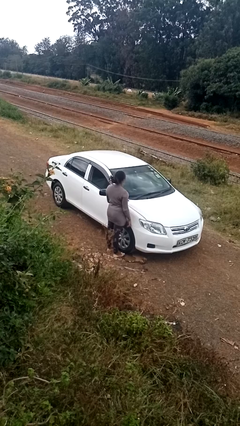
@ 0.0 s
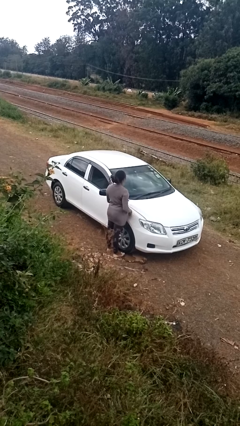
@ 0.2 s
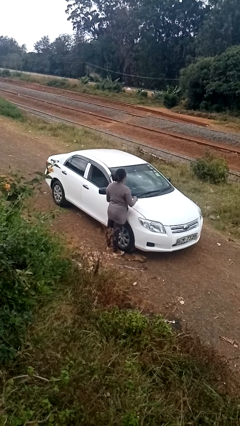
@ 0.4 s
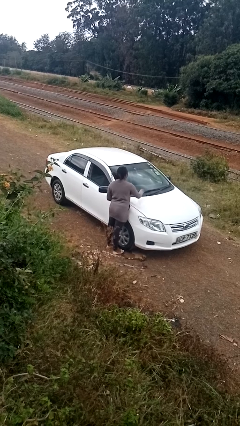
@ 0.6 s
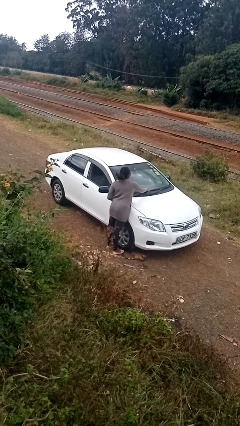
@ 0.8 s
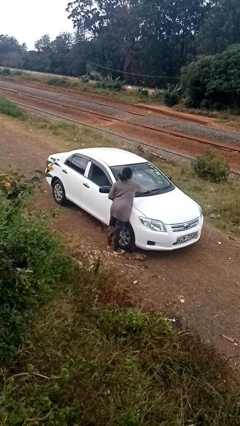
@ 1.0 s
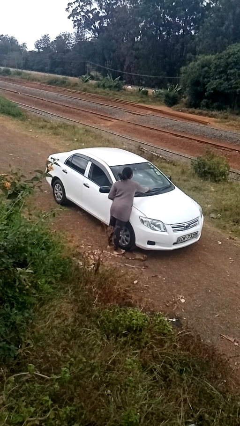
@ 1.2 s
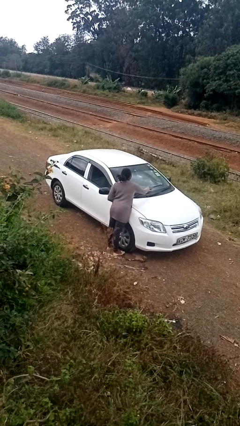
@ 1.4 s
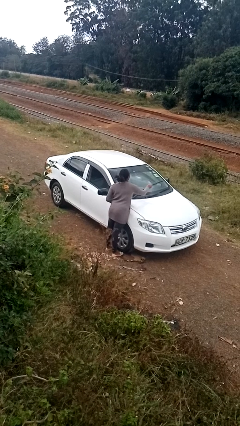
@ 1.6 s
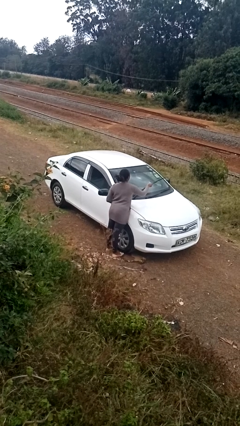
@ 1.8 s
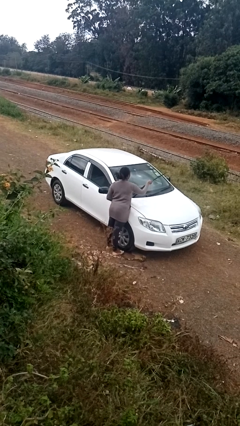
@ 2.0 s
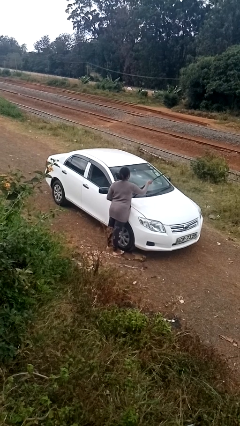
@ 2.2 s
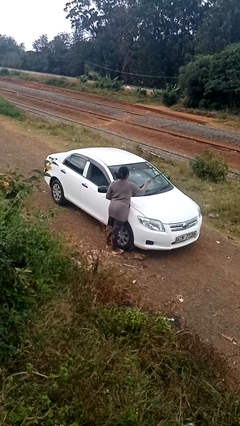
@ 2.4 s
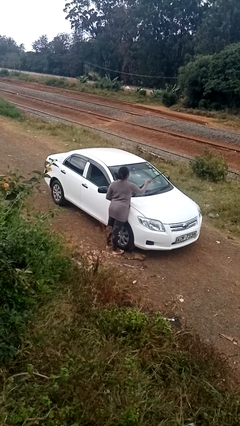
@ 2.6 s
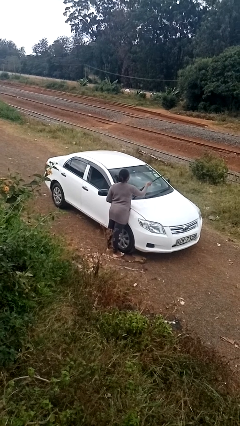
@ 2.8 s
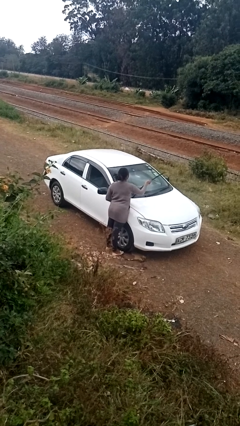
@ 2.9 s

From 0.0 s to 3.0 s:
person flips up car wipers

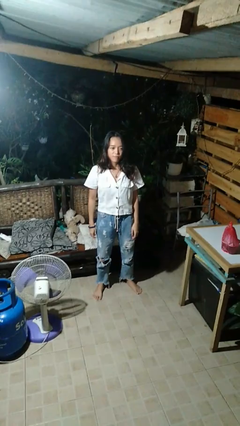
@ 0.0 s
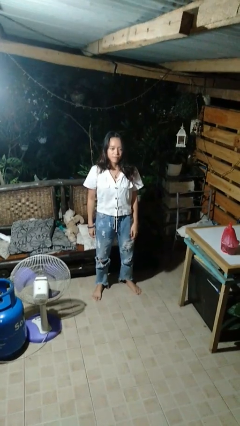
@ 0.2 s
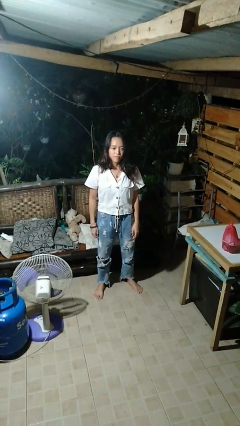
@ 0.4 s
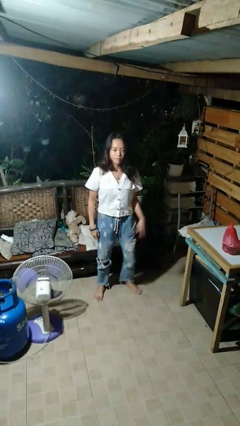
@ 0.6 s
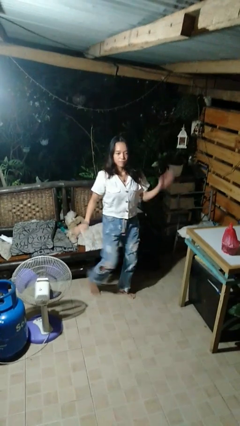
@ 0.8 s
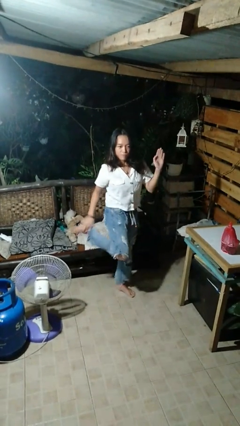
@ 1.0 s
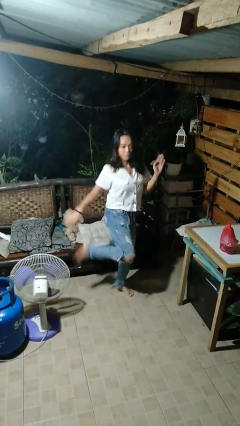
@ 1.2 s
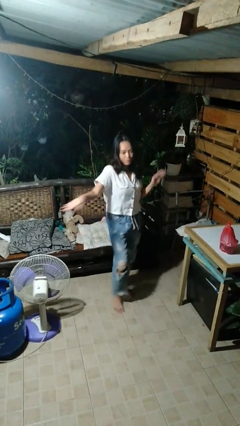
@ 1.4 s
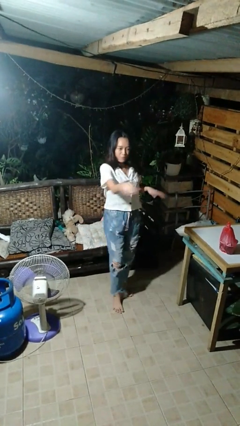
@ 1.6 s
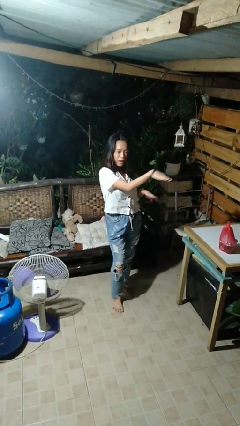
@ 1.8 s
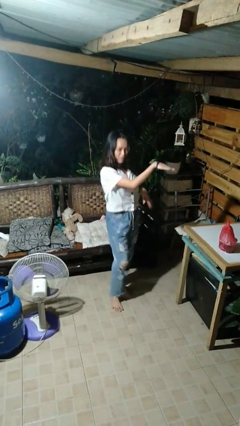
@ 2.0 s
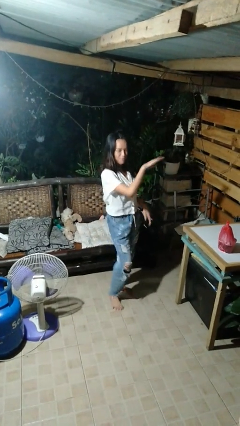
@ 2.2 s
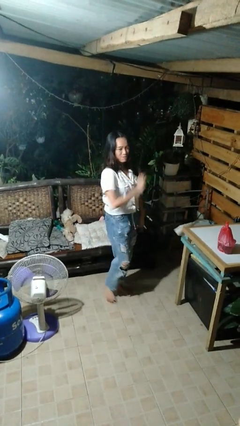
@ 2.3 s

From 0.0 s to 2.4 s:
person dances in place

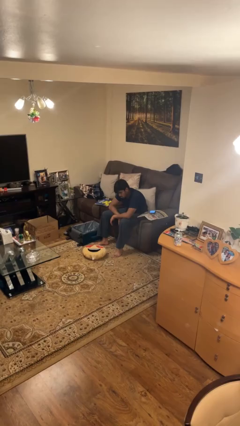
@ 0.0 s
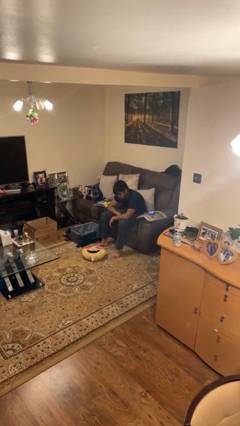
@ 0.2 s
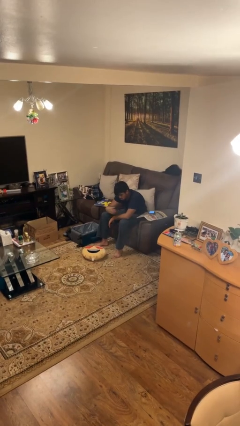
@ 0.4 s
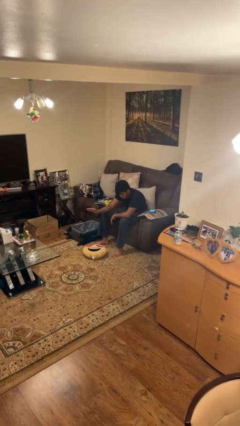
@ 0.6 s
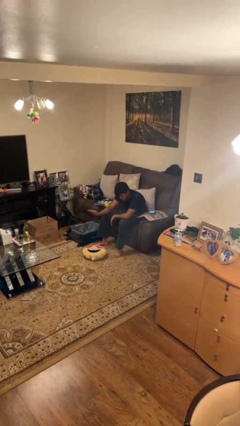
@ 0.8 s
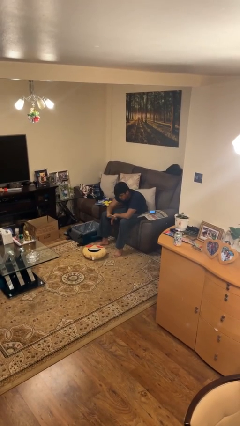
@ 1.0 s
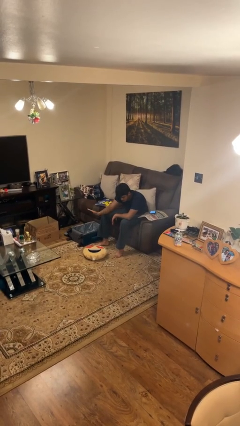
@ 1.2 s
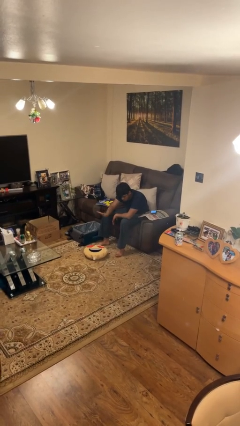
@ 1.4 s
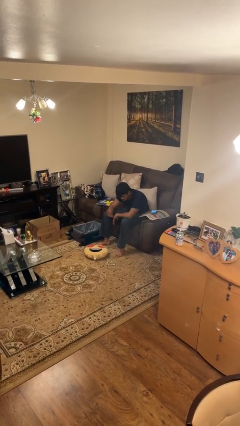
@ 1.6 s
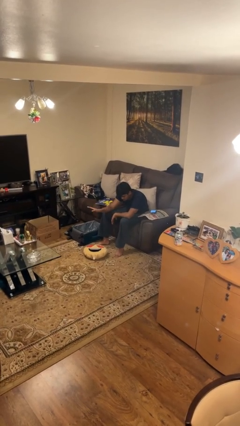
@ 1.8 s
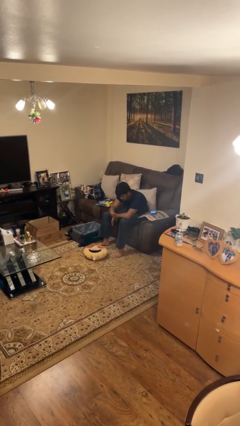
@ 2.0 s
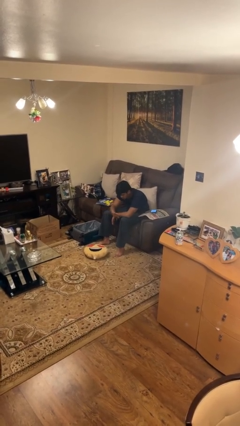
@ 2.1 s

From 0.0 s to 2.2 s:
person waves hand over object

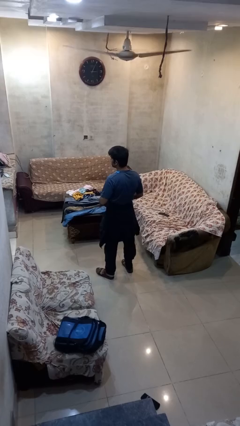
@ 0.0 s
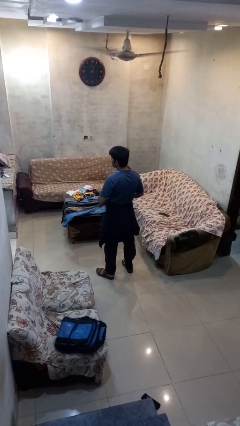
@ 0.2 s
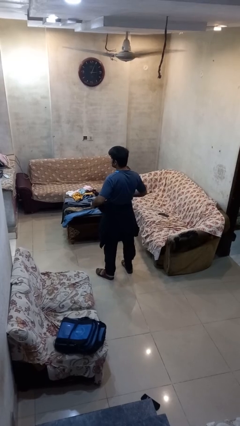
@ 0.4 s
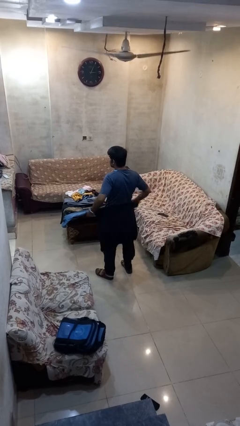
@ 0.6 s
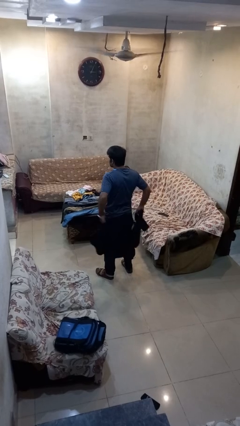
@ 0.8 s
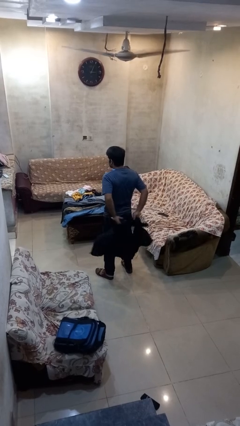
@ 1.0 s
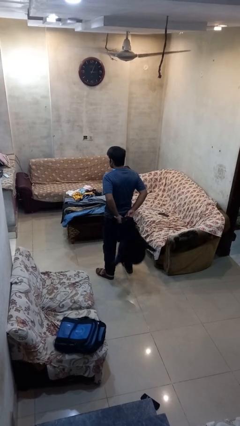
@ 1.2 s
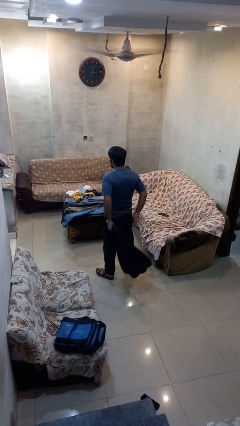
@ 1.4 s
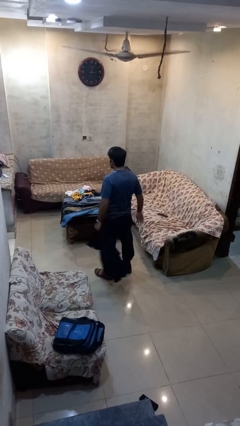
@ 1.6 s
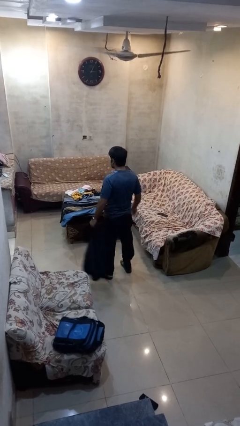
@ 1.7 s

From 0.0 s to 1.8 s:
person unties jacket around waist

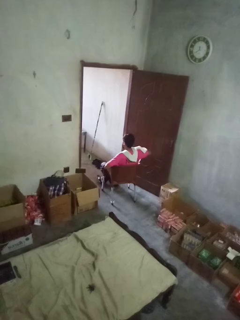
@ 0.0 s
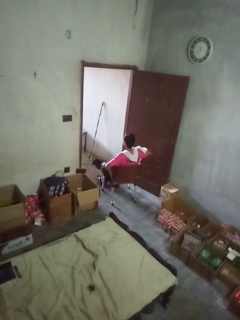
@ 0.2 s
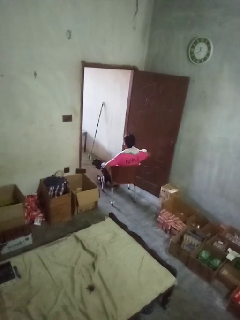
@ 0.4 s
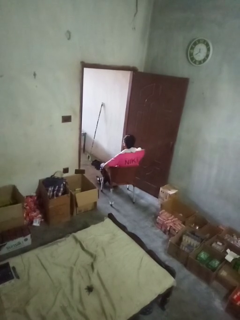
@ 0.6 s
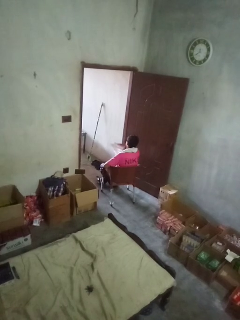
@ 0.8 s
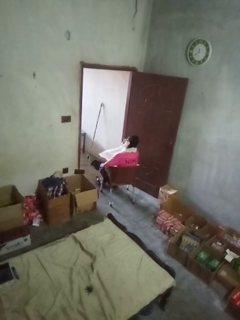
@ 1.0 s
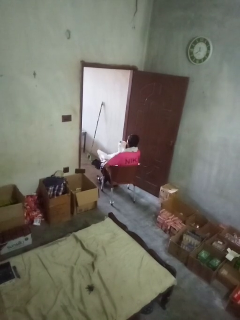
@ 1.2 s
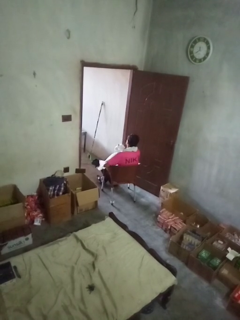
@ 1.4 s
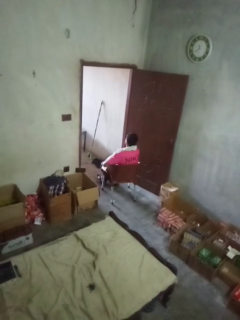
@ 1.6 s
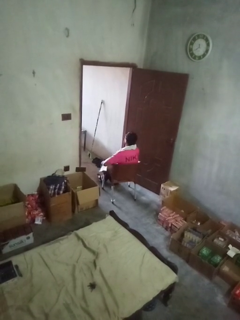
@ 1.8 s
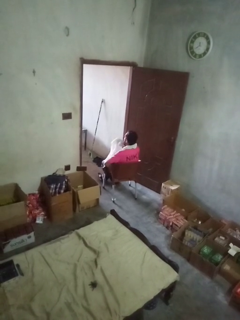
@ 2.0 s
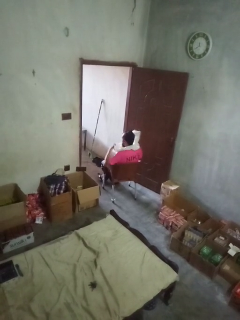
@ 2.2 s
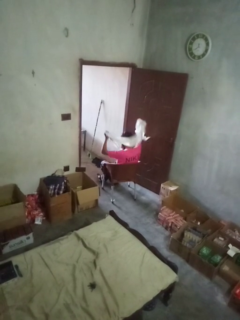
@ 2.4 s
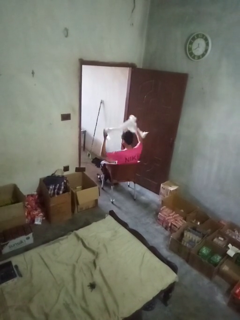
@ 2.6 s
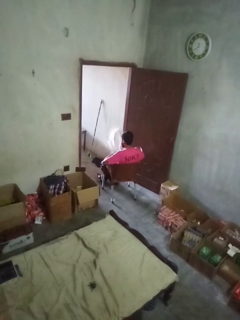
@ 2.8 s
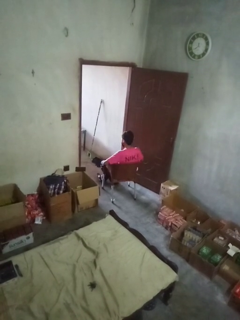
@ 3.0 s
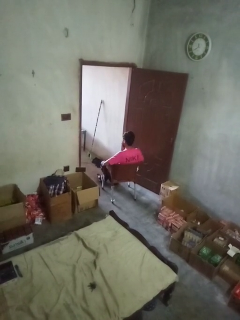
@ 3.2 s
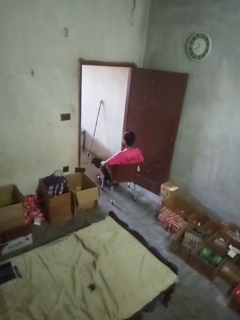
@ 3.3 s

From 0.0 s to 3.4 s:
person takes off scarf

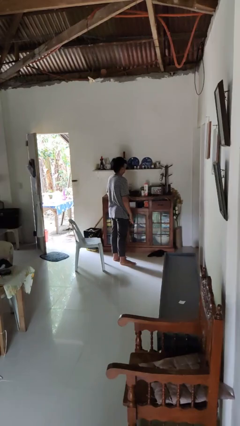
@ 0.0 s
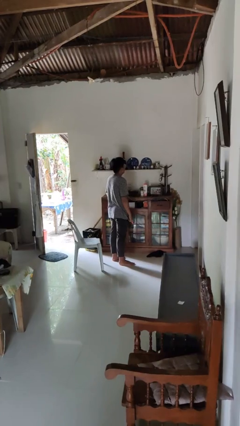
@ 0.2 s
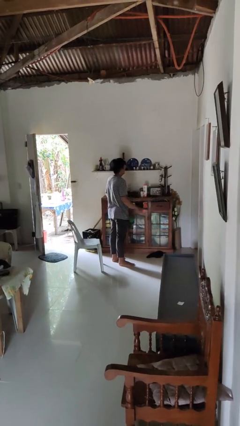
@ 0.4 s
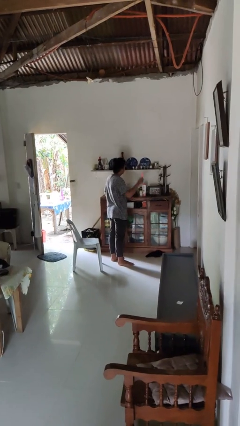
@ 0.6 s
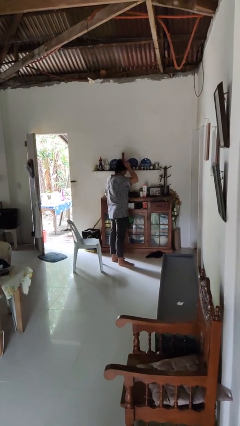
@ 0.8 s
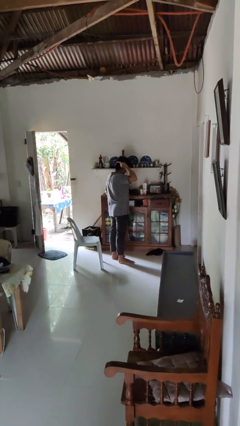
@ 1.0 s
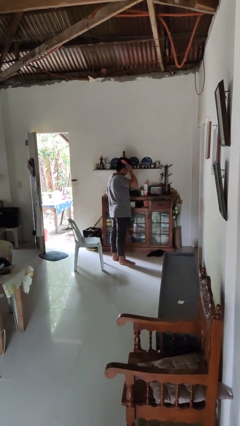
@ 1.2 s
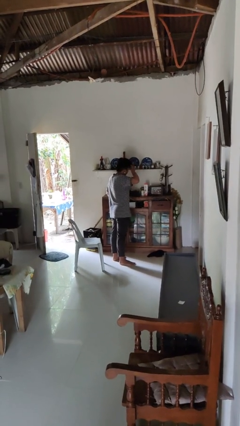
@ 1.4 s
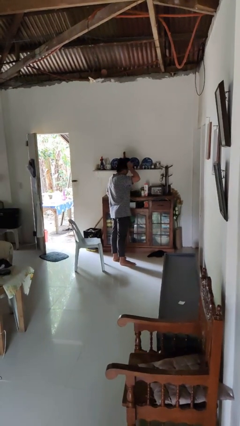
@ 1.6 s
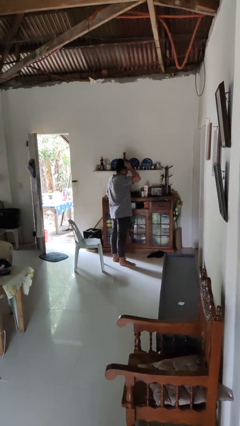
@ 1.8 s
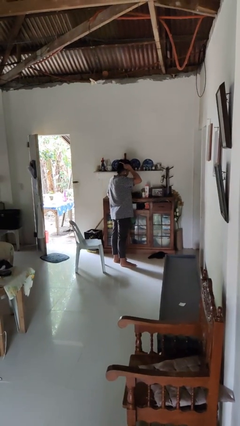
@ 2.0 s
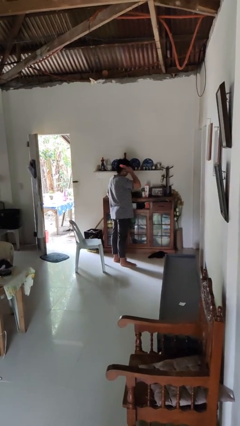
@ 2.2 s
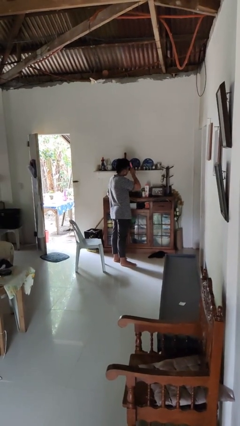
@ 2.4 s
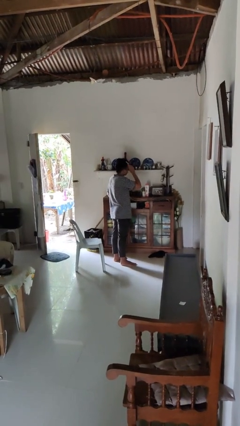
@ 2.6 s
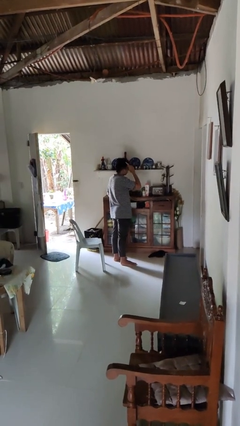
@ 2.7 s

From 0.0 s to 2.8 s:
person brushes hair

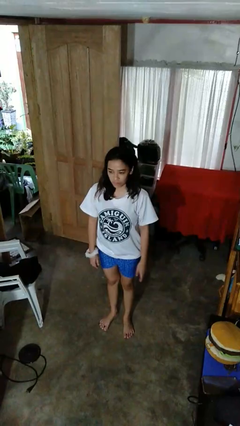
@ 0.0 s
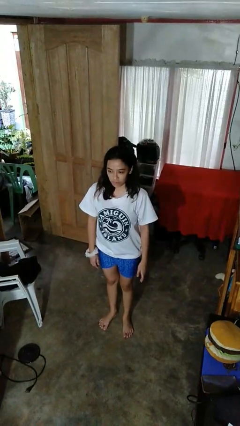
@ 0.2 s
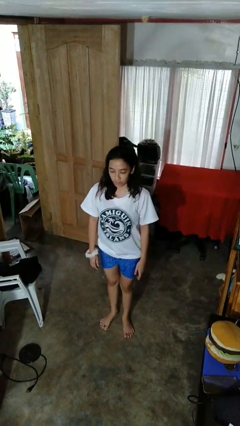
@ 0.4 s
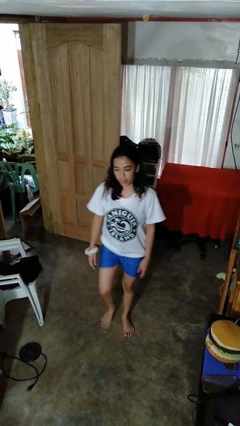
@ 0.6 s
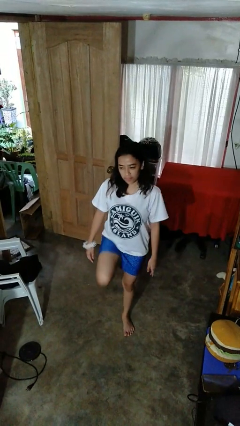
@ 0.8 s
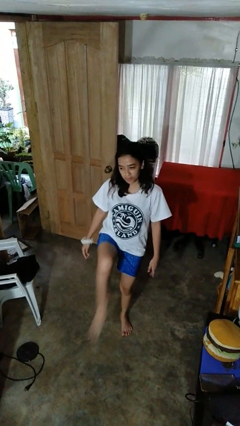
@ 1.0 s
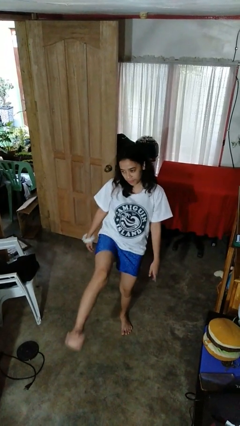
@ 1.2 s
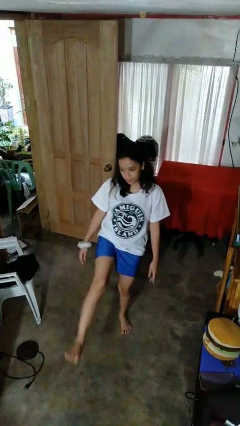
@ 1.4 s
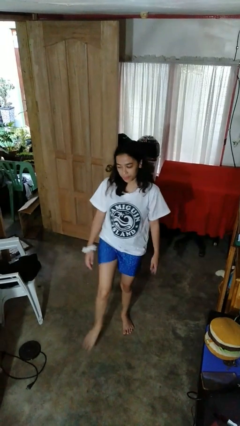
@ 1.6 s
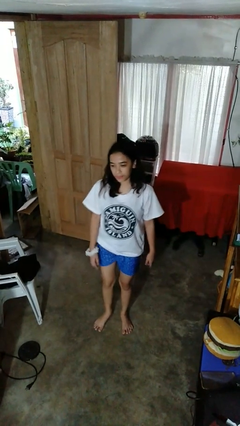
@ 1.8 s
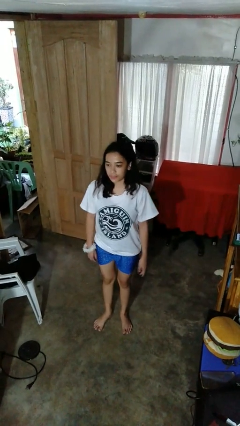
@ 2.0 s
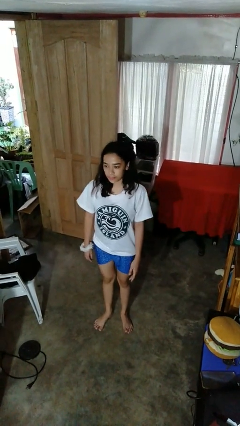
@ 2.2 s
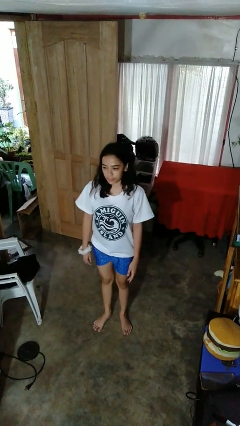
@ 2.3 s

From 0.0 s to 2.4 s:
person karate kicks

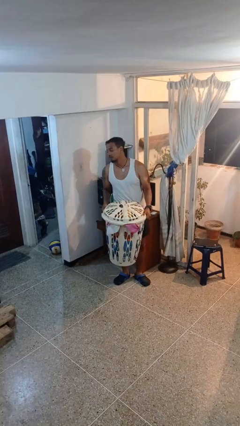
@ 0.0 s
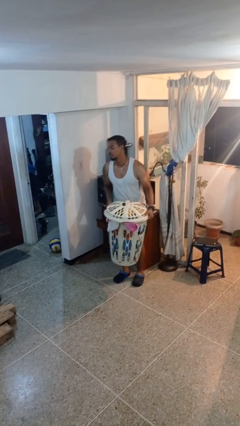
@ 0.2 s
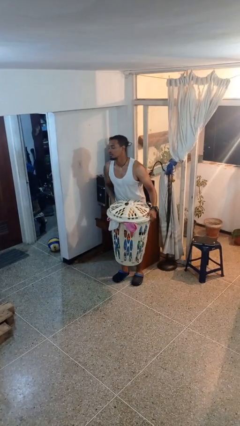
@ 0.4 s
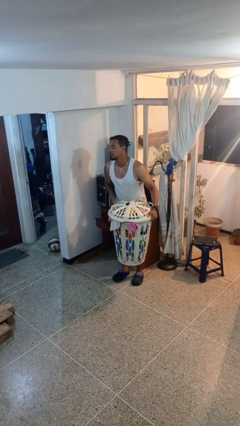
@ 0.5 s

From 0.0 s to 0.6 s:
person carries laundry basket
